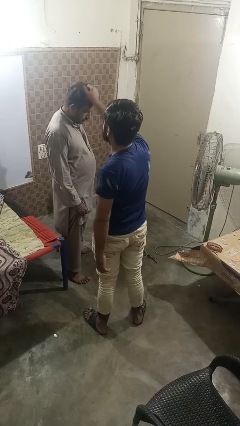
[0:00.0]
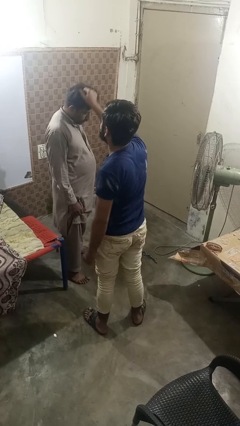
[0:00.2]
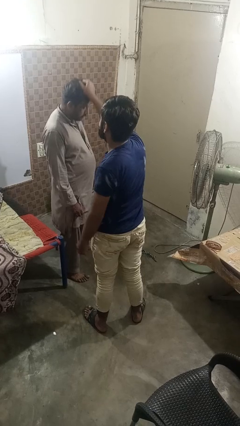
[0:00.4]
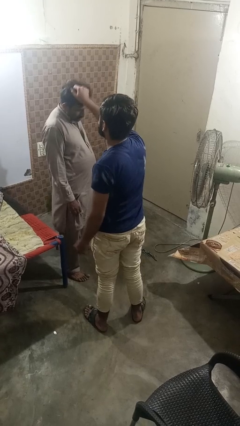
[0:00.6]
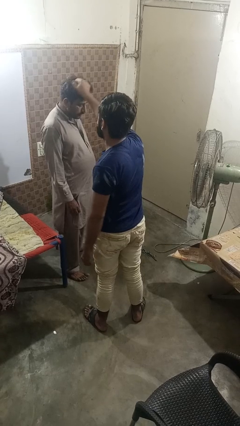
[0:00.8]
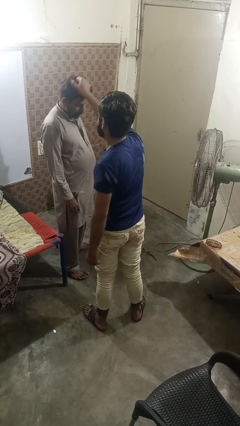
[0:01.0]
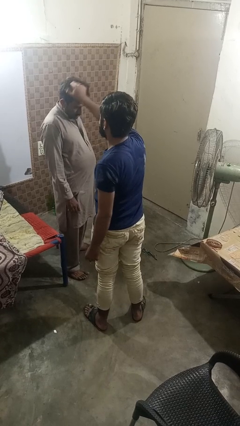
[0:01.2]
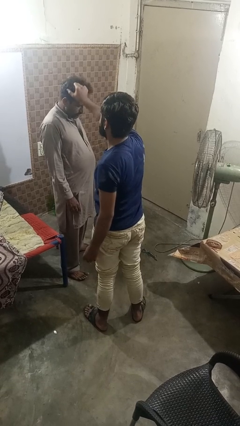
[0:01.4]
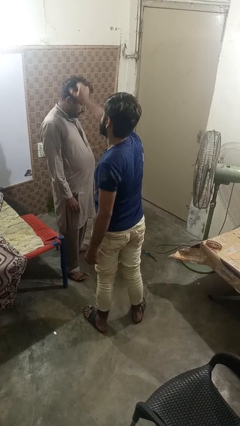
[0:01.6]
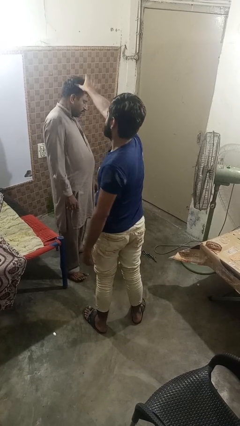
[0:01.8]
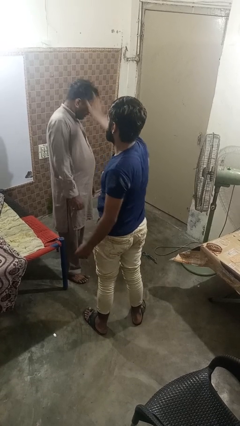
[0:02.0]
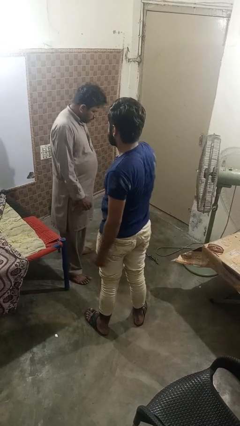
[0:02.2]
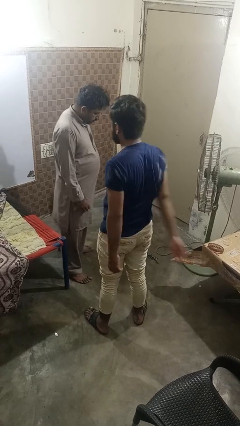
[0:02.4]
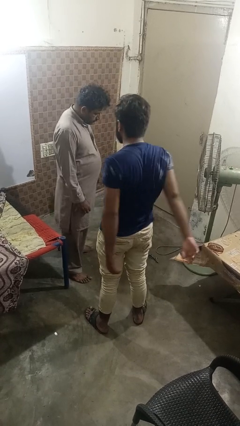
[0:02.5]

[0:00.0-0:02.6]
person grabs person by hair

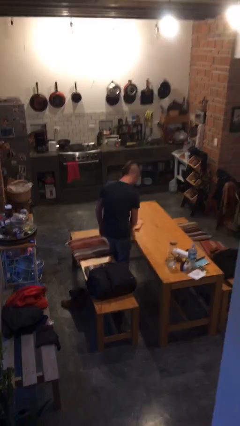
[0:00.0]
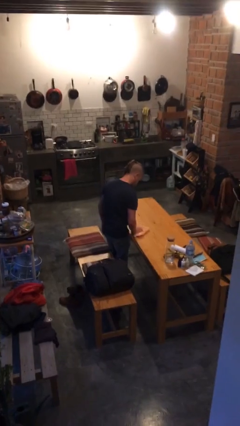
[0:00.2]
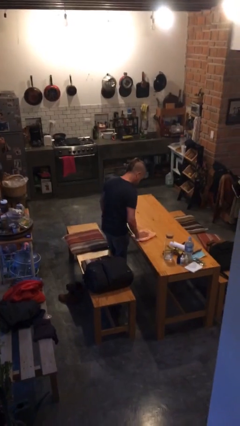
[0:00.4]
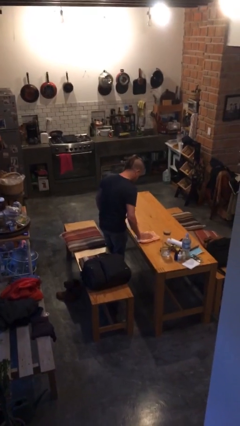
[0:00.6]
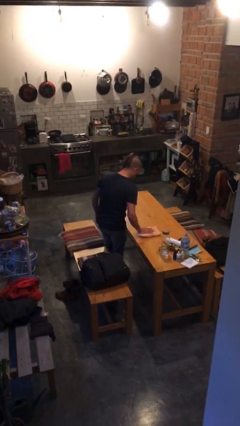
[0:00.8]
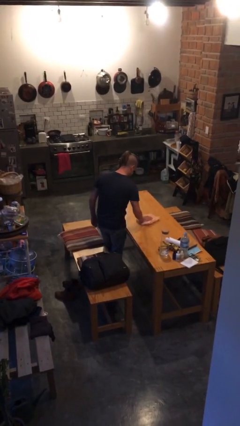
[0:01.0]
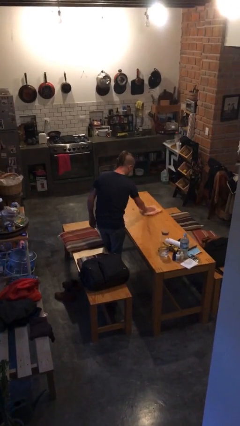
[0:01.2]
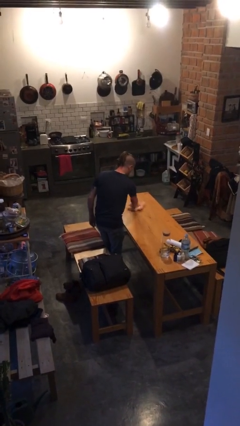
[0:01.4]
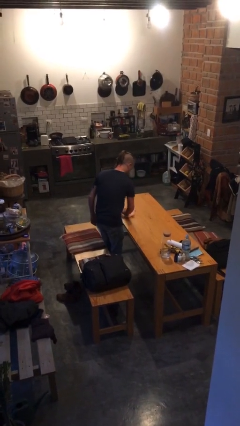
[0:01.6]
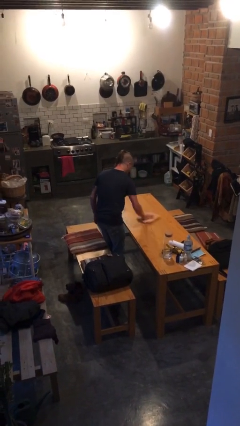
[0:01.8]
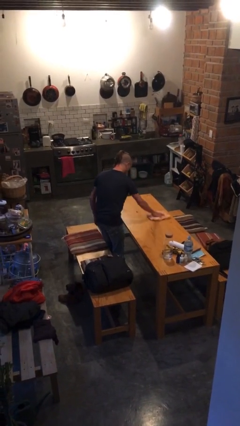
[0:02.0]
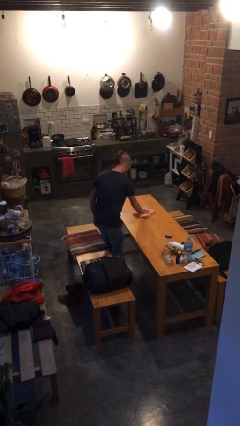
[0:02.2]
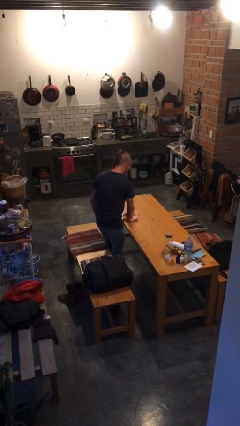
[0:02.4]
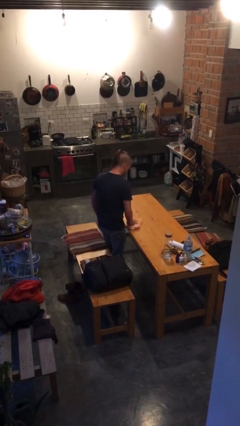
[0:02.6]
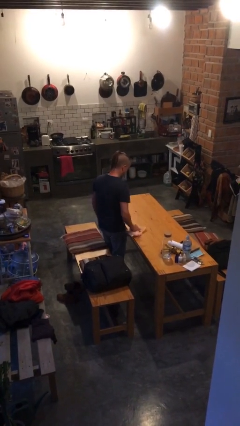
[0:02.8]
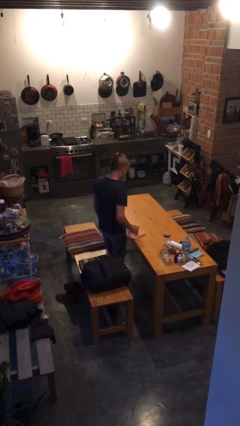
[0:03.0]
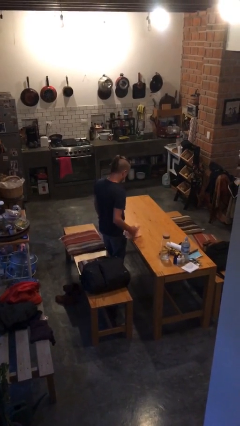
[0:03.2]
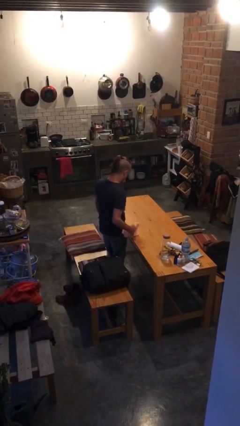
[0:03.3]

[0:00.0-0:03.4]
person cleans table with rag

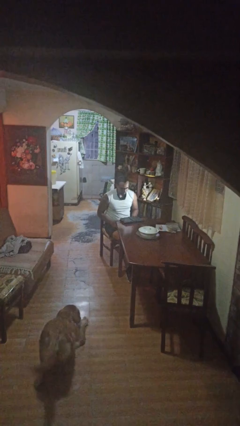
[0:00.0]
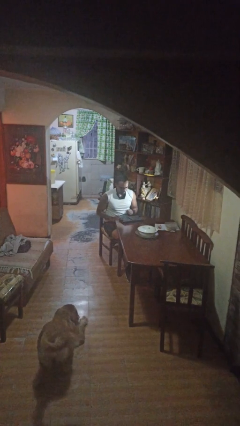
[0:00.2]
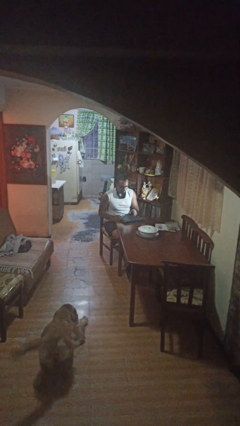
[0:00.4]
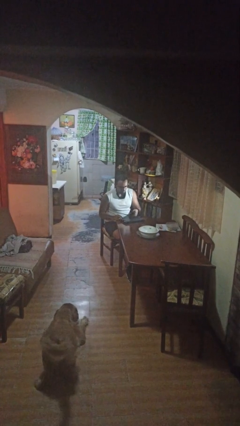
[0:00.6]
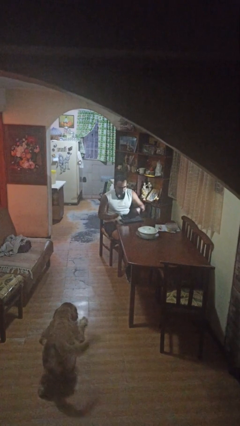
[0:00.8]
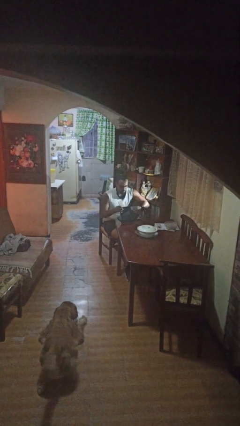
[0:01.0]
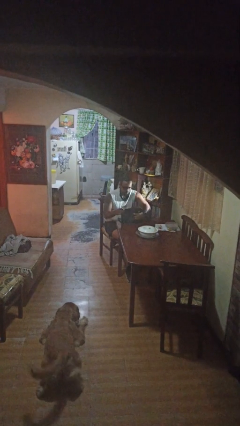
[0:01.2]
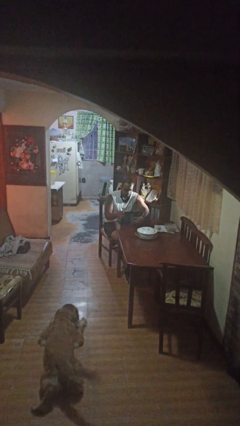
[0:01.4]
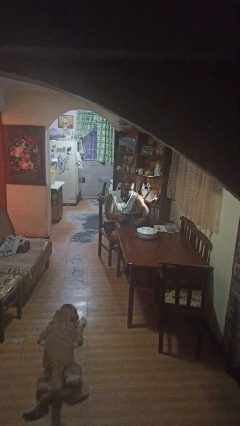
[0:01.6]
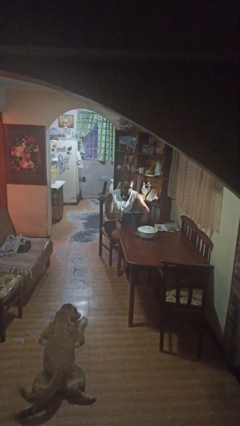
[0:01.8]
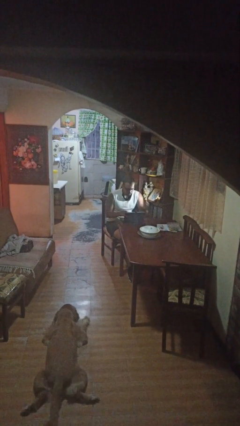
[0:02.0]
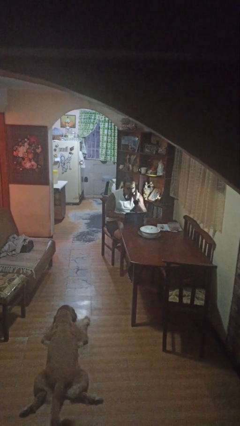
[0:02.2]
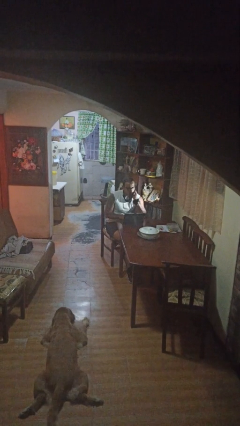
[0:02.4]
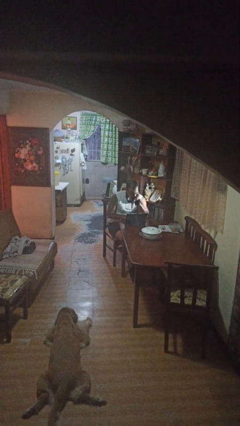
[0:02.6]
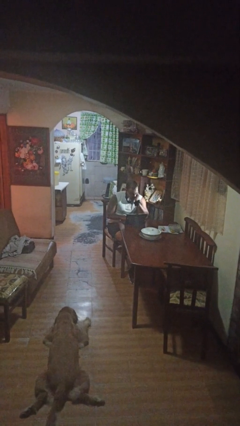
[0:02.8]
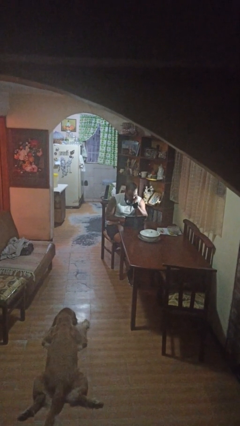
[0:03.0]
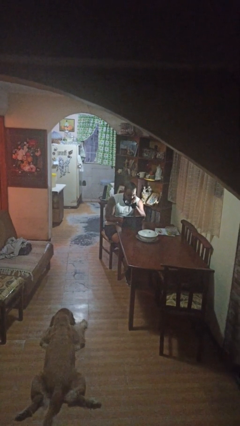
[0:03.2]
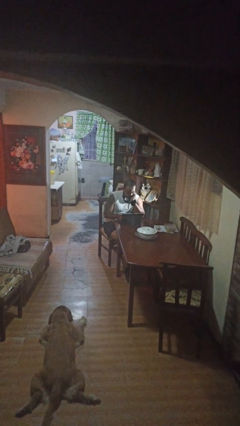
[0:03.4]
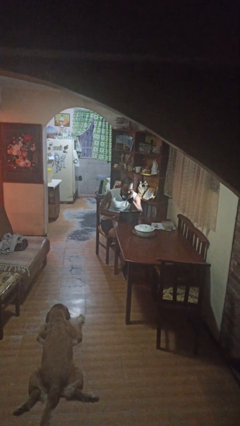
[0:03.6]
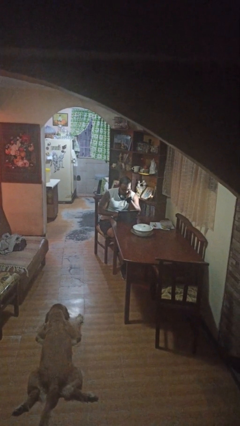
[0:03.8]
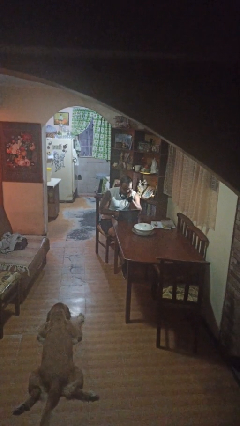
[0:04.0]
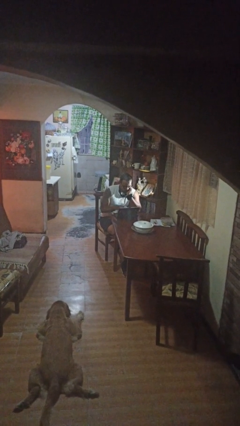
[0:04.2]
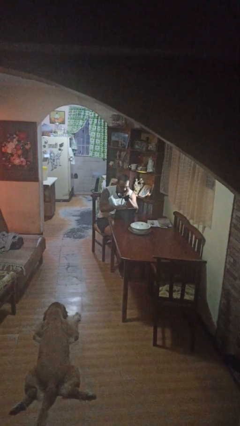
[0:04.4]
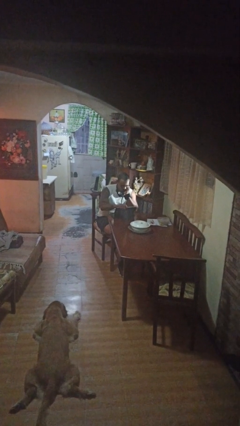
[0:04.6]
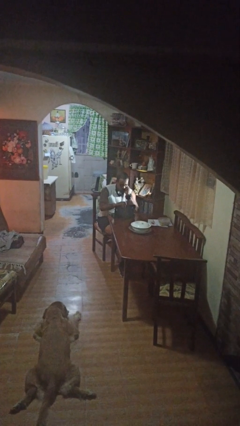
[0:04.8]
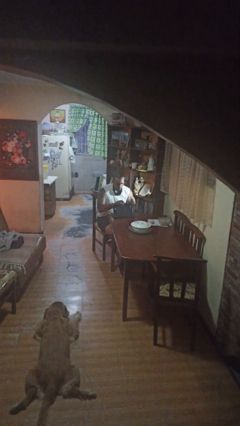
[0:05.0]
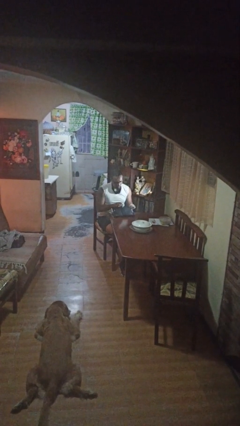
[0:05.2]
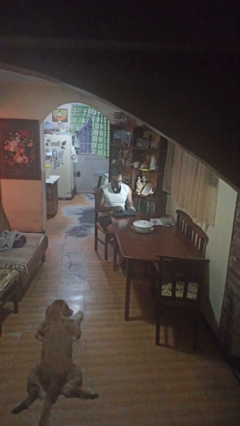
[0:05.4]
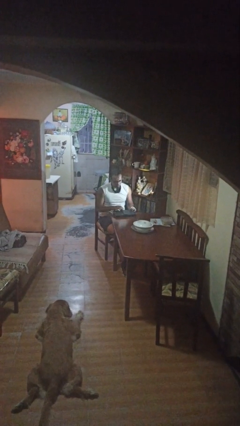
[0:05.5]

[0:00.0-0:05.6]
person interacts with laptop

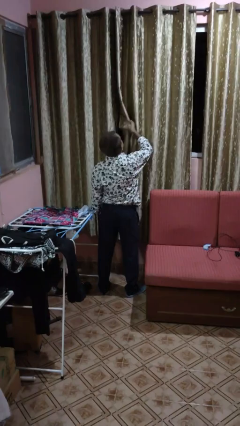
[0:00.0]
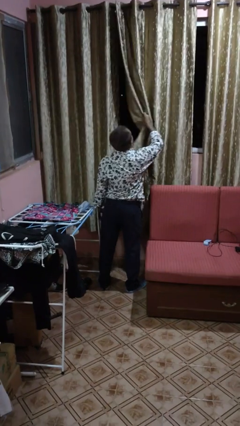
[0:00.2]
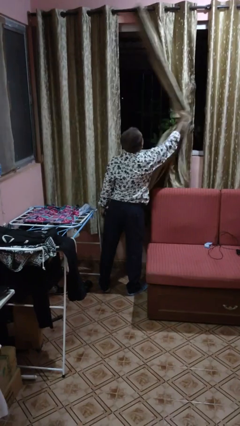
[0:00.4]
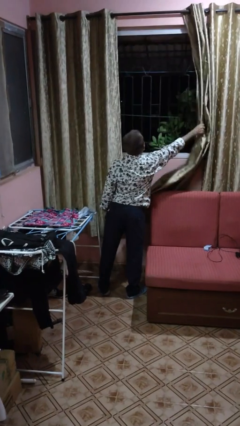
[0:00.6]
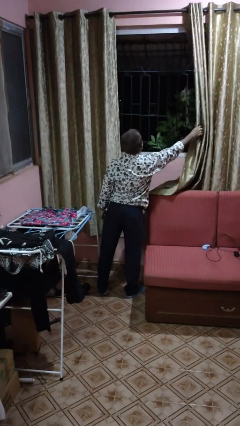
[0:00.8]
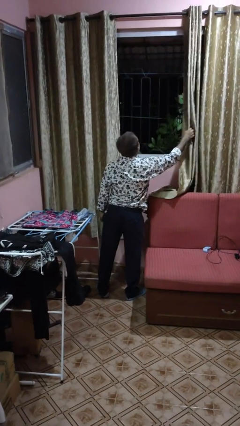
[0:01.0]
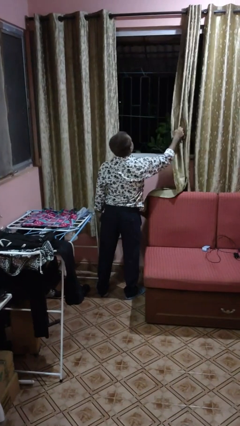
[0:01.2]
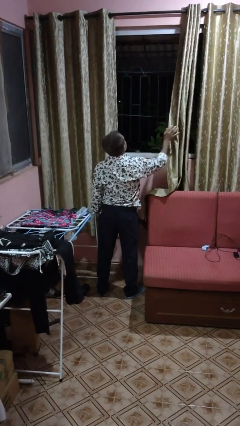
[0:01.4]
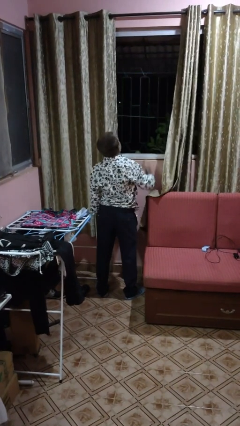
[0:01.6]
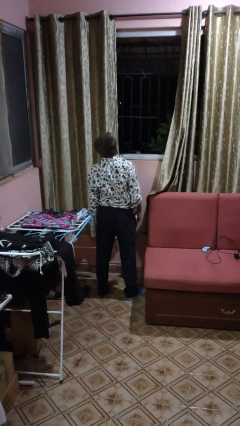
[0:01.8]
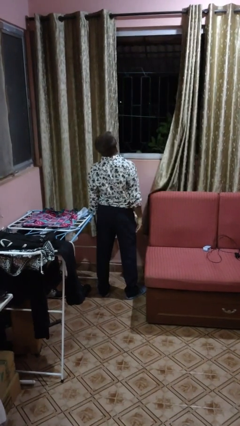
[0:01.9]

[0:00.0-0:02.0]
person opens curtains

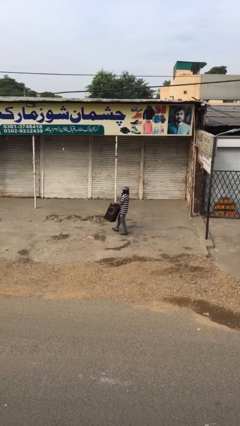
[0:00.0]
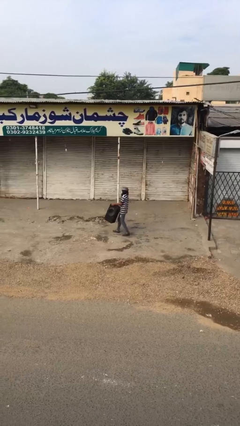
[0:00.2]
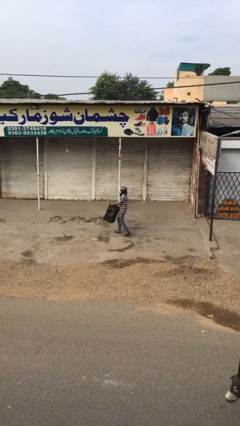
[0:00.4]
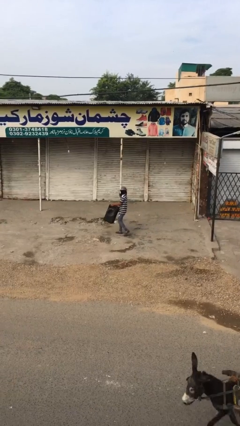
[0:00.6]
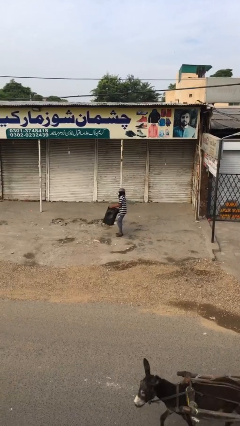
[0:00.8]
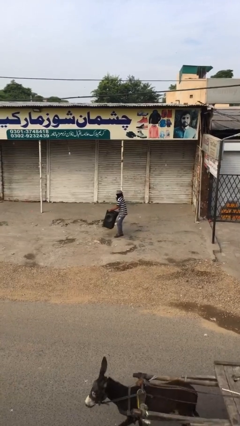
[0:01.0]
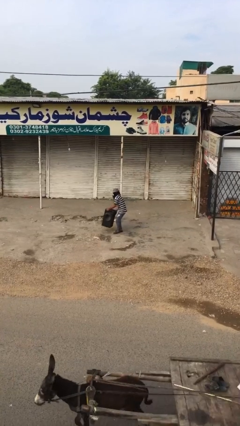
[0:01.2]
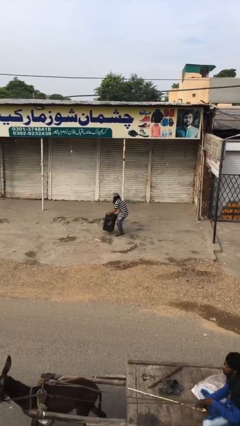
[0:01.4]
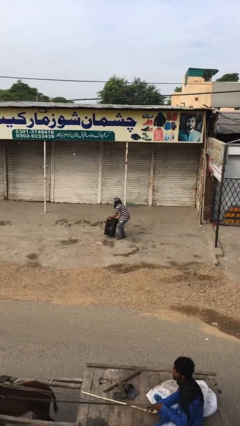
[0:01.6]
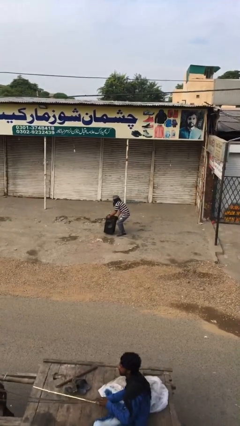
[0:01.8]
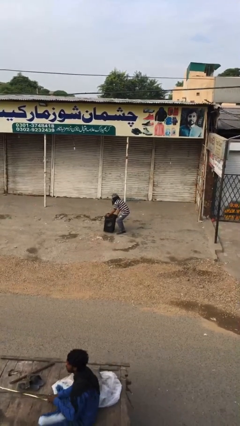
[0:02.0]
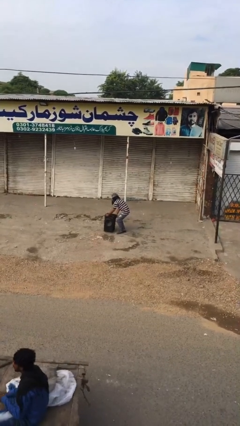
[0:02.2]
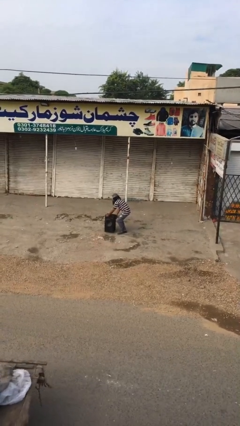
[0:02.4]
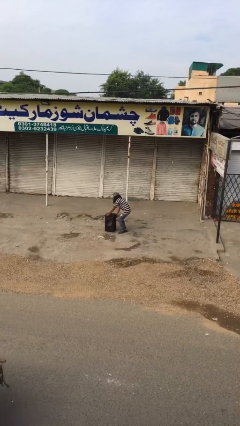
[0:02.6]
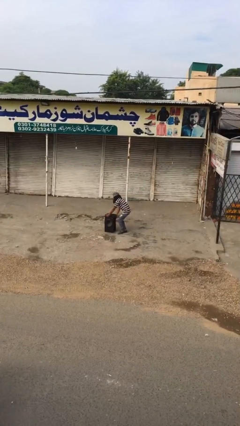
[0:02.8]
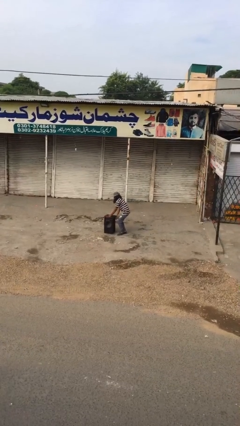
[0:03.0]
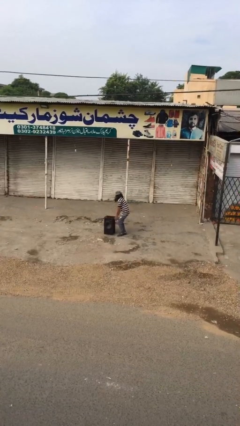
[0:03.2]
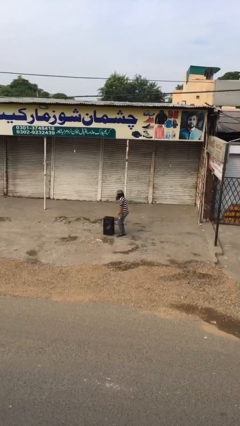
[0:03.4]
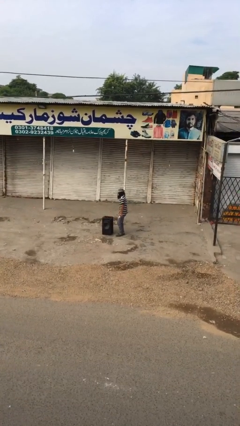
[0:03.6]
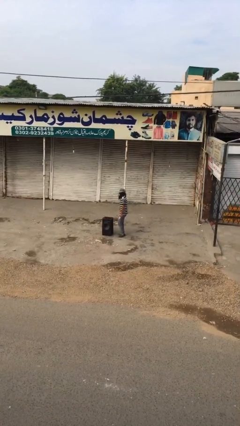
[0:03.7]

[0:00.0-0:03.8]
person puts down object on floor
